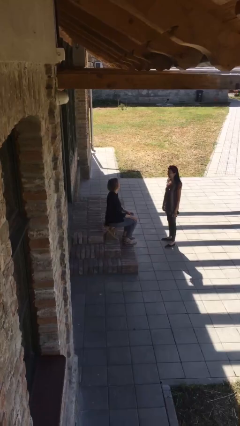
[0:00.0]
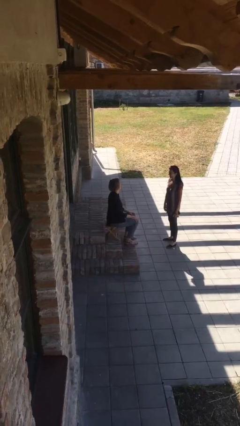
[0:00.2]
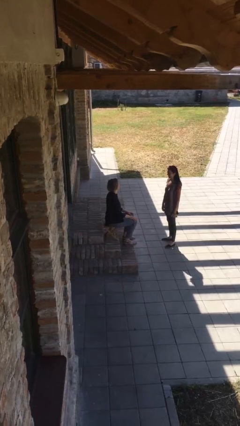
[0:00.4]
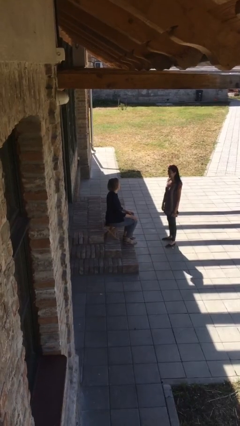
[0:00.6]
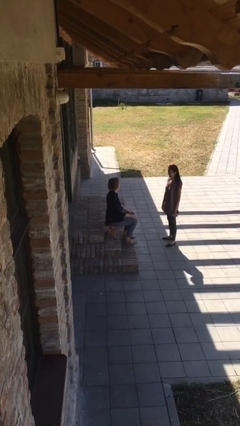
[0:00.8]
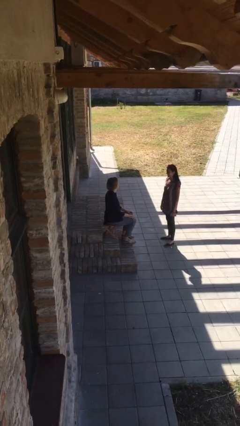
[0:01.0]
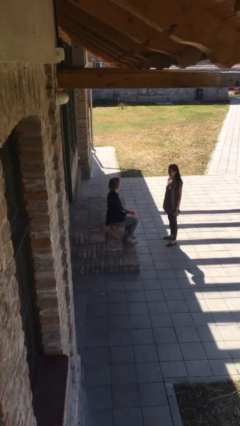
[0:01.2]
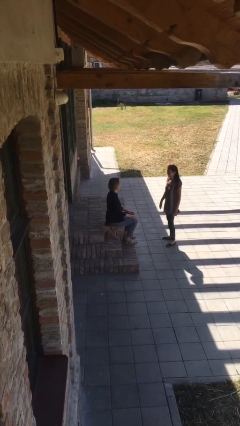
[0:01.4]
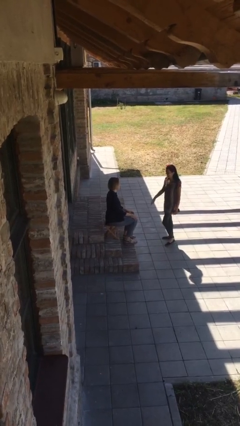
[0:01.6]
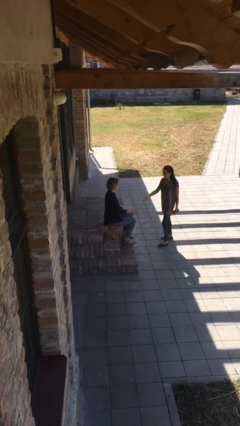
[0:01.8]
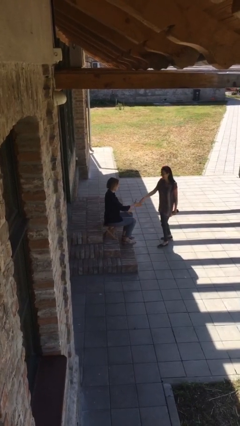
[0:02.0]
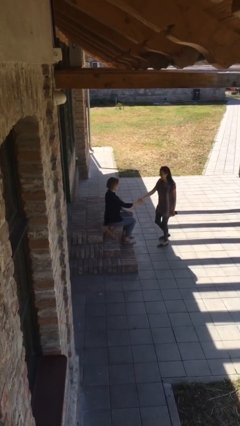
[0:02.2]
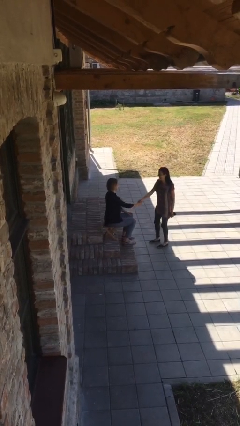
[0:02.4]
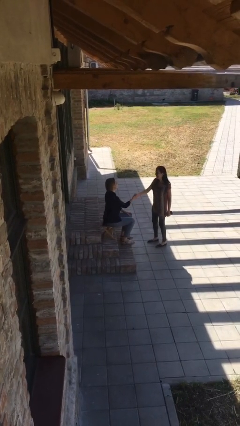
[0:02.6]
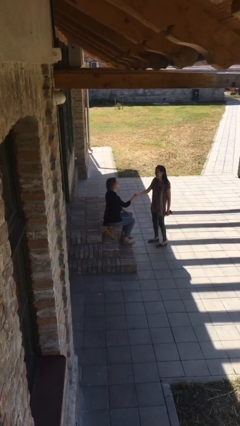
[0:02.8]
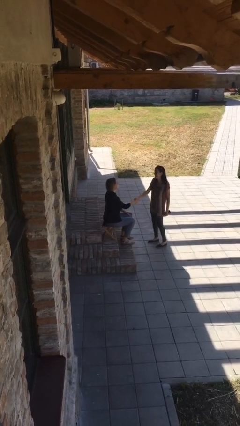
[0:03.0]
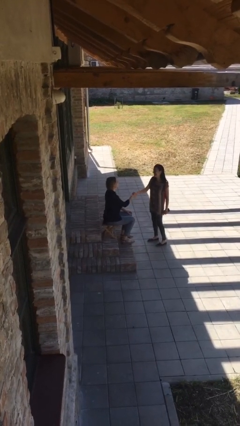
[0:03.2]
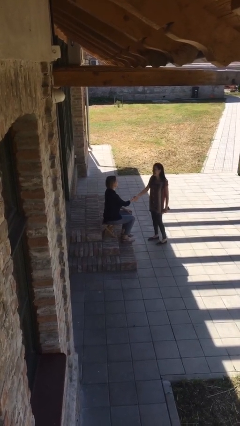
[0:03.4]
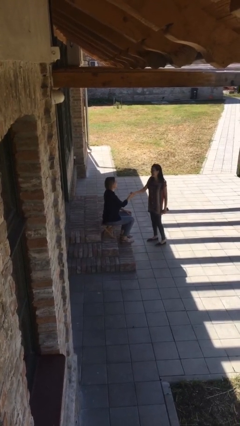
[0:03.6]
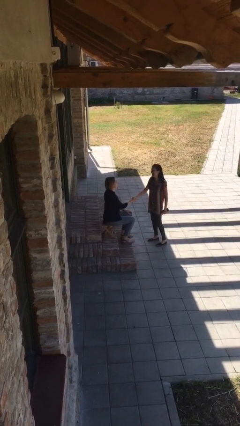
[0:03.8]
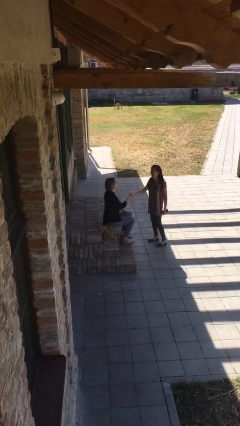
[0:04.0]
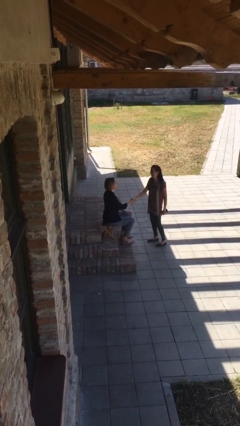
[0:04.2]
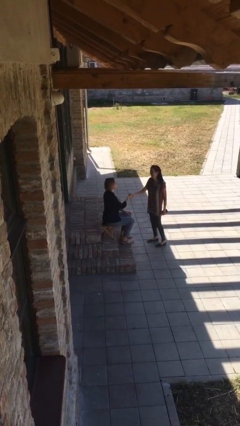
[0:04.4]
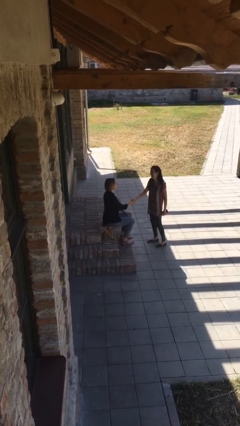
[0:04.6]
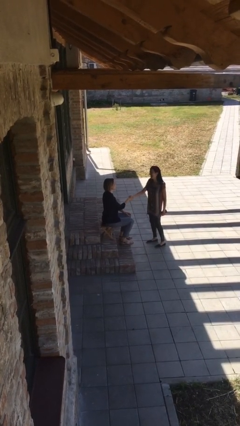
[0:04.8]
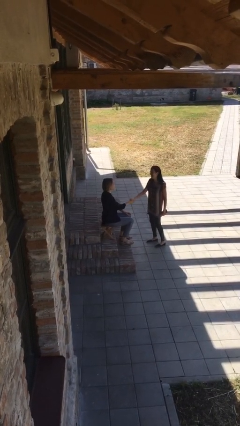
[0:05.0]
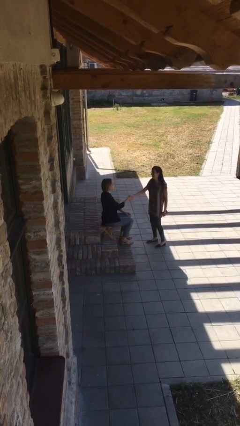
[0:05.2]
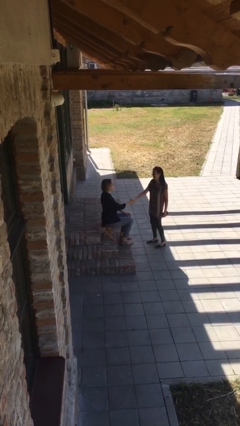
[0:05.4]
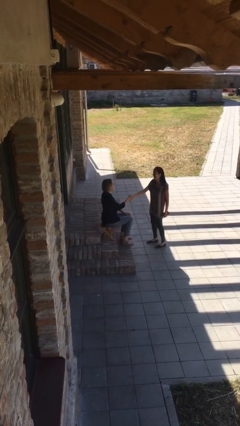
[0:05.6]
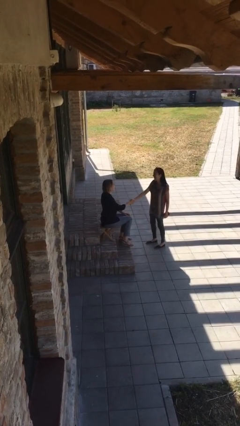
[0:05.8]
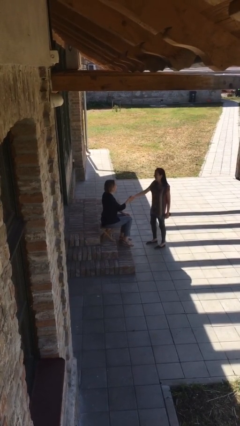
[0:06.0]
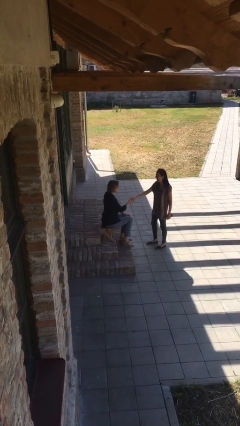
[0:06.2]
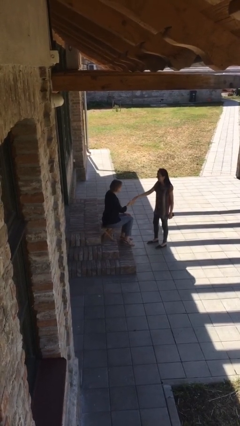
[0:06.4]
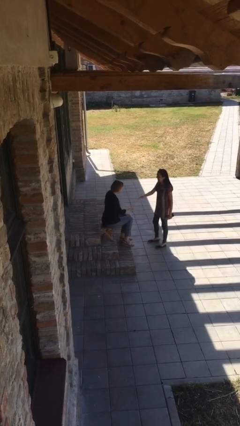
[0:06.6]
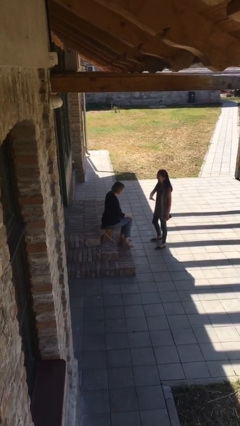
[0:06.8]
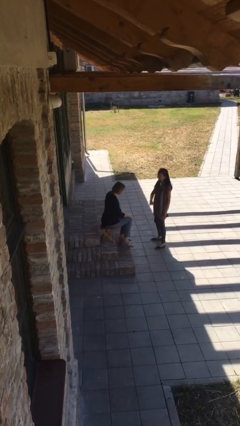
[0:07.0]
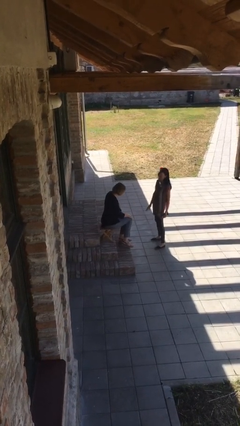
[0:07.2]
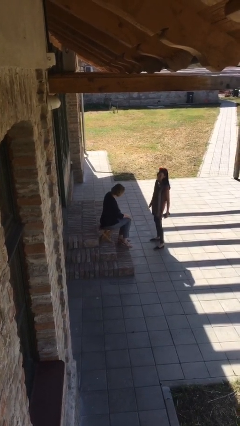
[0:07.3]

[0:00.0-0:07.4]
person shakes hand

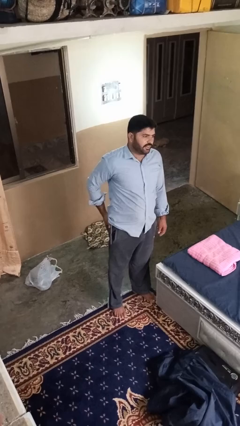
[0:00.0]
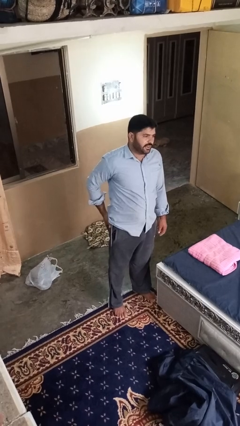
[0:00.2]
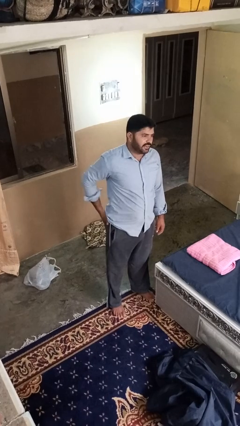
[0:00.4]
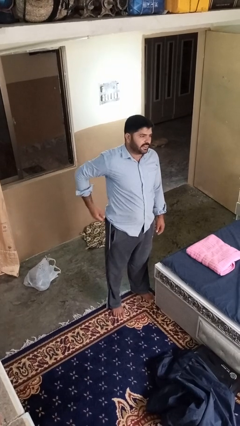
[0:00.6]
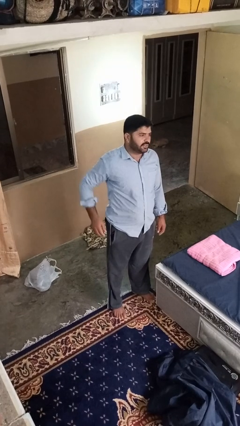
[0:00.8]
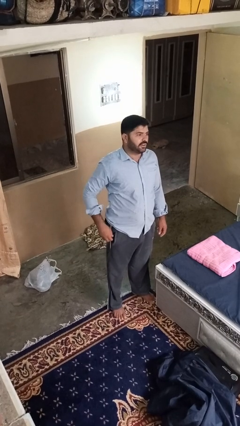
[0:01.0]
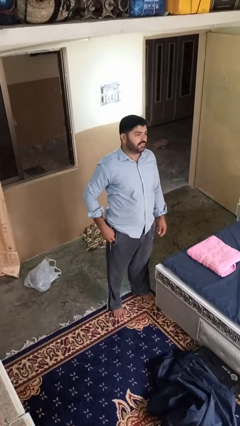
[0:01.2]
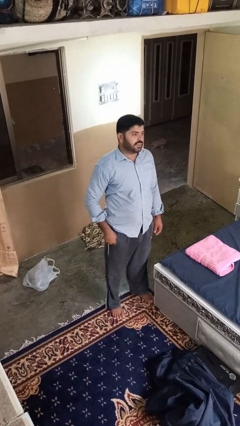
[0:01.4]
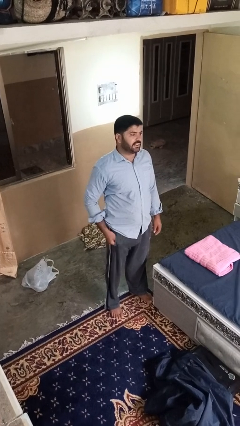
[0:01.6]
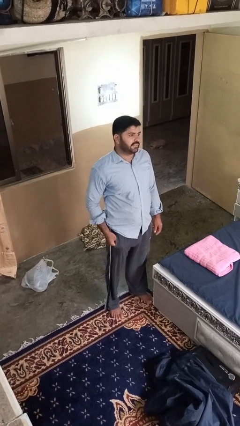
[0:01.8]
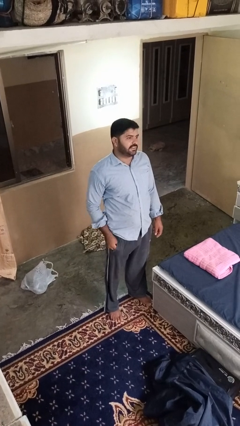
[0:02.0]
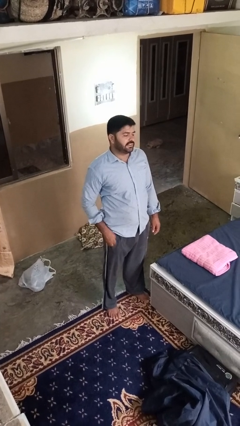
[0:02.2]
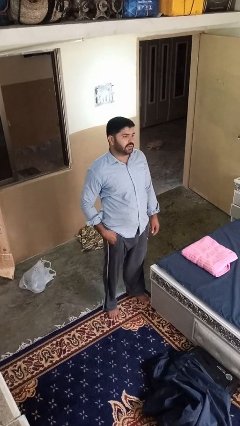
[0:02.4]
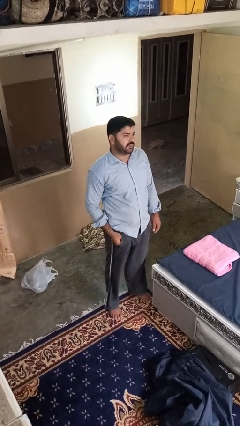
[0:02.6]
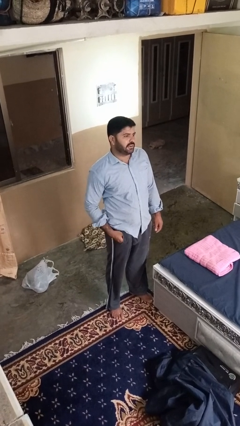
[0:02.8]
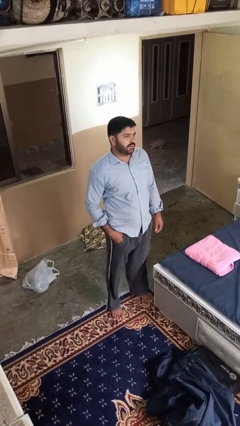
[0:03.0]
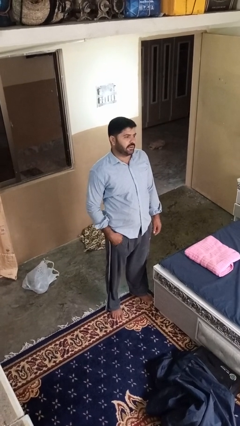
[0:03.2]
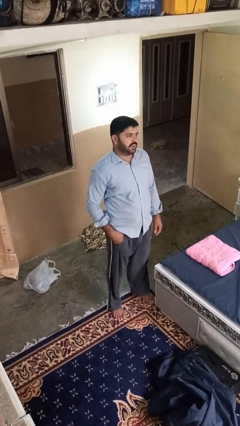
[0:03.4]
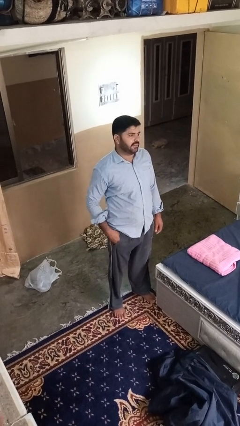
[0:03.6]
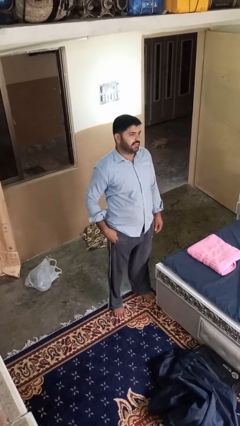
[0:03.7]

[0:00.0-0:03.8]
person puts hands in back pockets

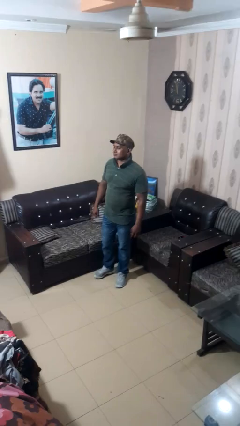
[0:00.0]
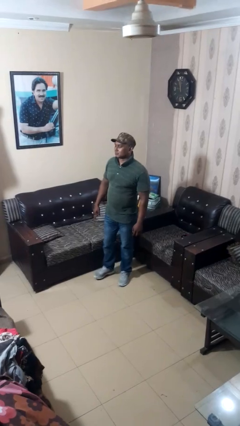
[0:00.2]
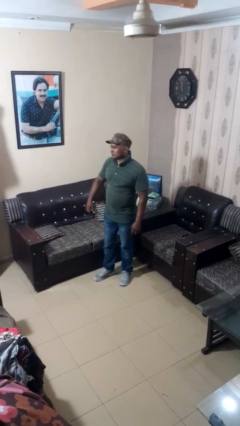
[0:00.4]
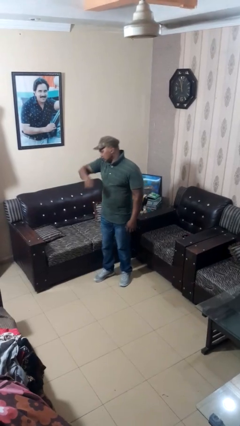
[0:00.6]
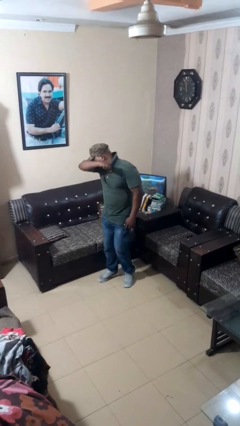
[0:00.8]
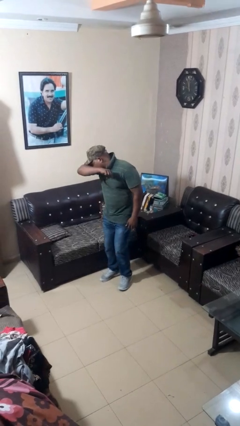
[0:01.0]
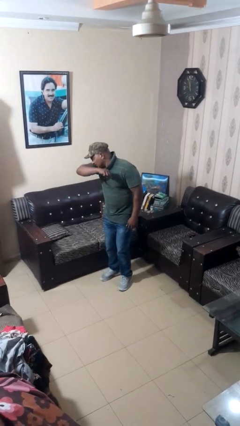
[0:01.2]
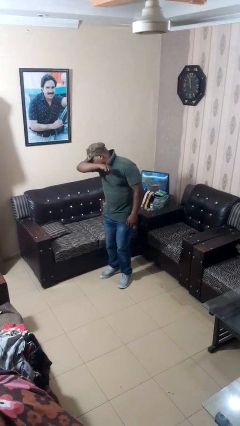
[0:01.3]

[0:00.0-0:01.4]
person sneezes into arm

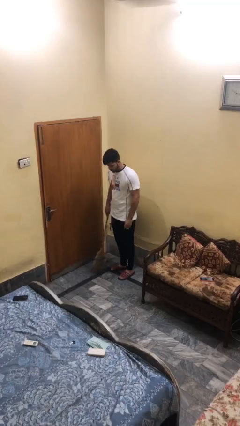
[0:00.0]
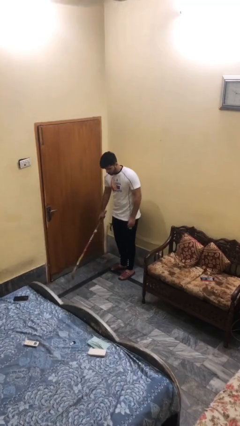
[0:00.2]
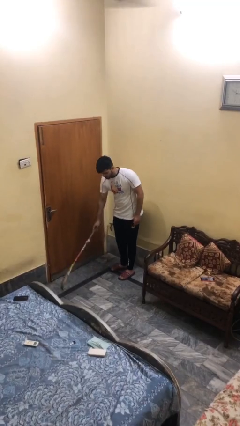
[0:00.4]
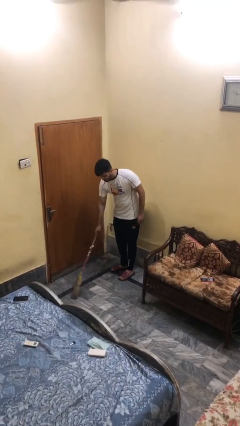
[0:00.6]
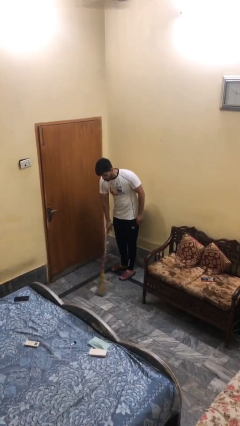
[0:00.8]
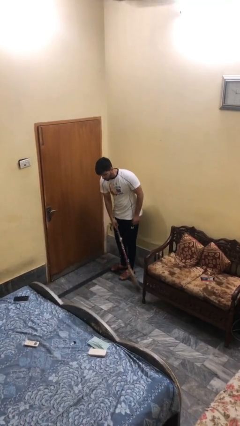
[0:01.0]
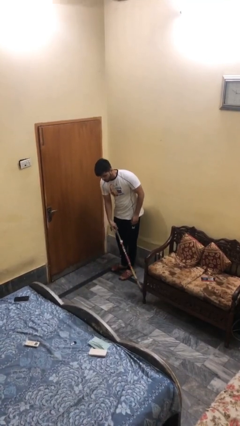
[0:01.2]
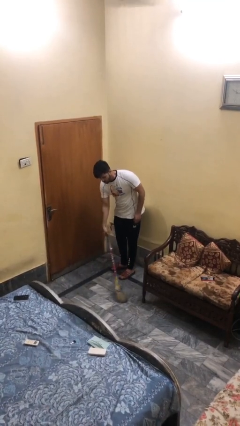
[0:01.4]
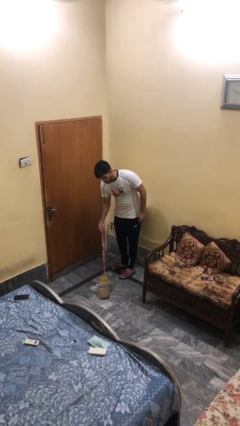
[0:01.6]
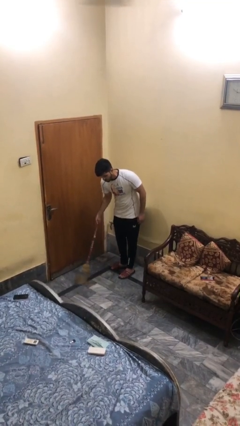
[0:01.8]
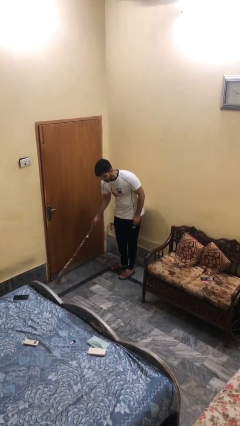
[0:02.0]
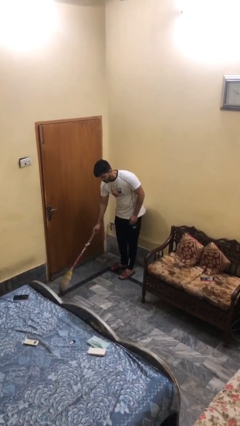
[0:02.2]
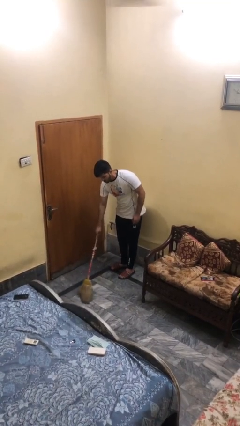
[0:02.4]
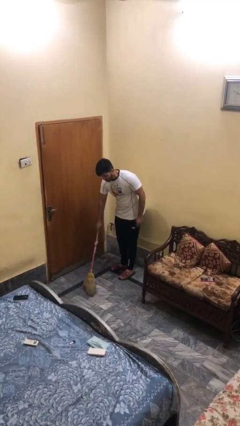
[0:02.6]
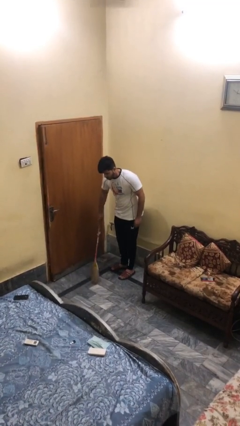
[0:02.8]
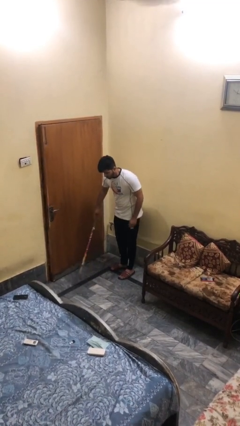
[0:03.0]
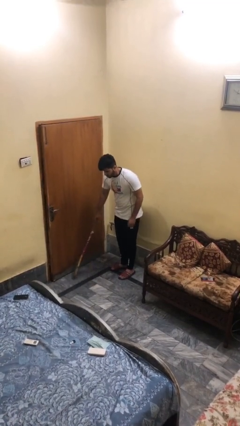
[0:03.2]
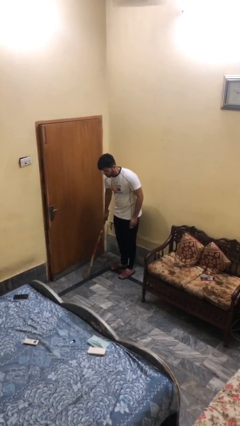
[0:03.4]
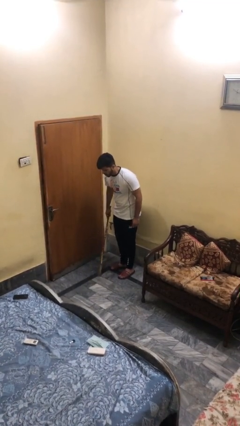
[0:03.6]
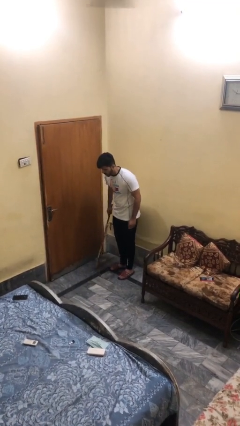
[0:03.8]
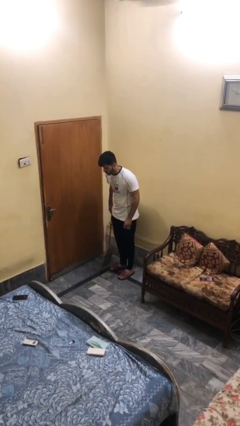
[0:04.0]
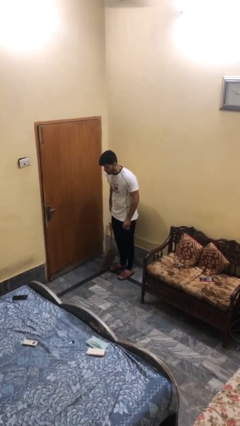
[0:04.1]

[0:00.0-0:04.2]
person sweeps floor

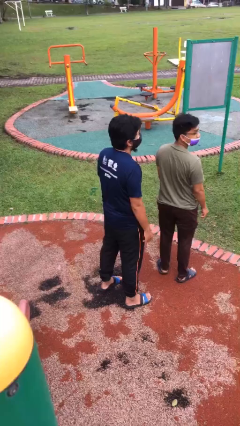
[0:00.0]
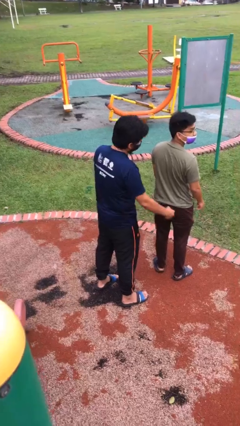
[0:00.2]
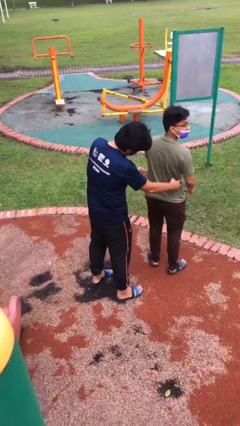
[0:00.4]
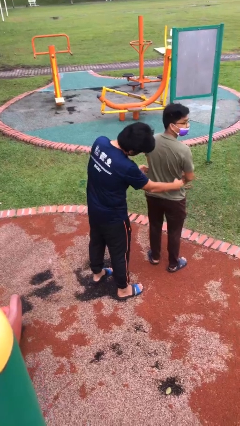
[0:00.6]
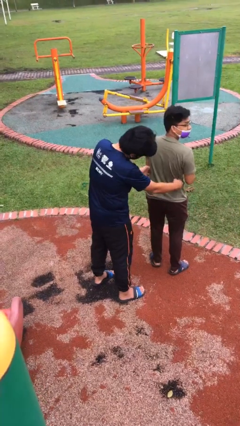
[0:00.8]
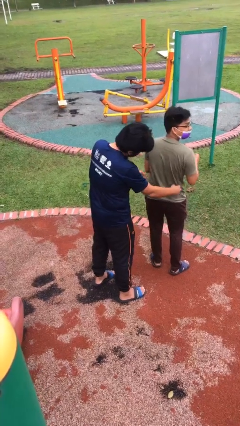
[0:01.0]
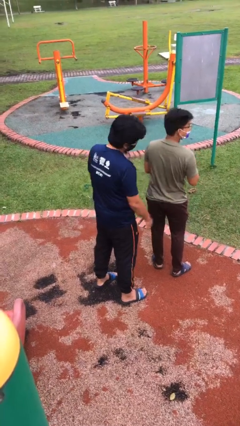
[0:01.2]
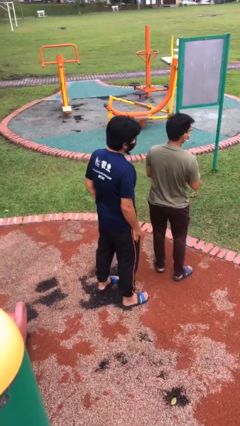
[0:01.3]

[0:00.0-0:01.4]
person tickles person
